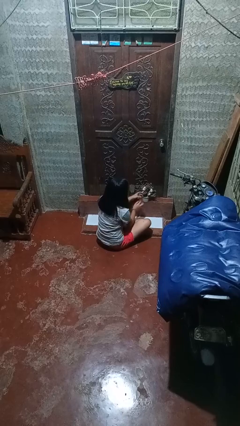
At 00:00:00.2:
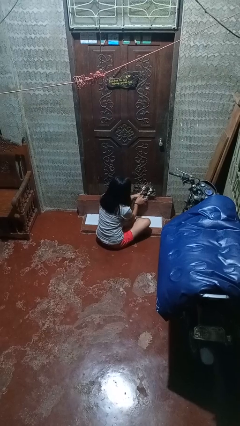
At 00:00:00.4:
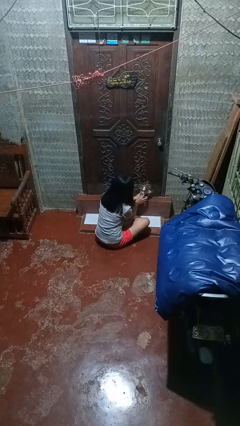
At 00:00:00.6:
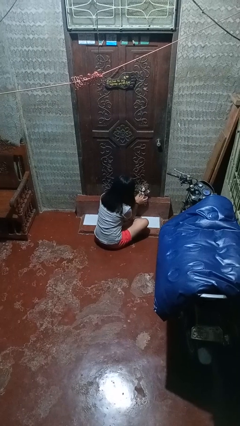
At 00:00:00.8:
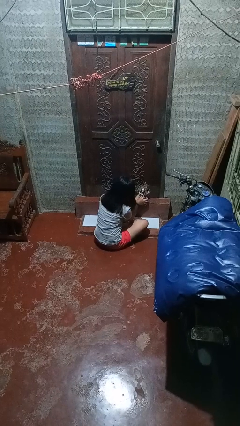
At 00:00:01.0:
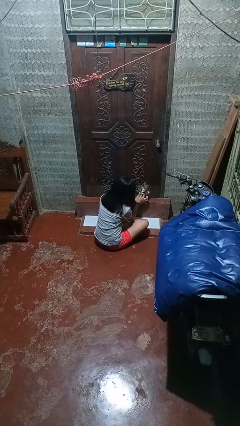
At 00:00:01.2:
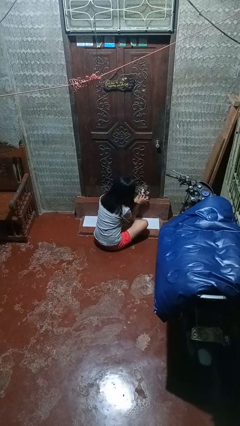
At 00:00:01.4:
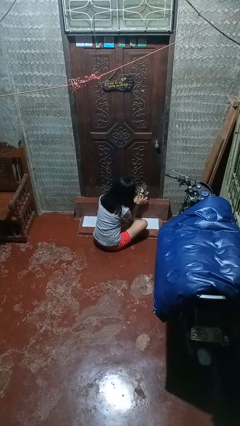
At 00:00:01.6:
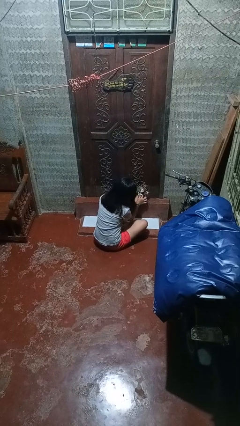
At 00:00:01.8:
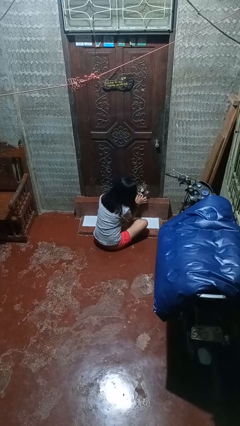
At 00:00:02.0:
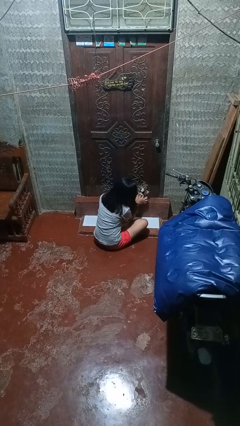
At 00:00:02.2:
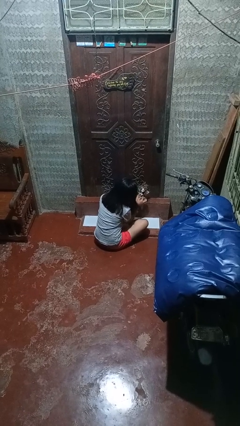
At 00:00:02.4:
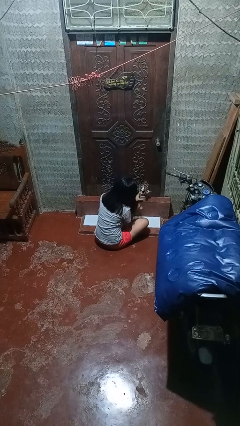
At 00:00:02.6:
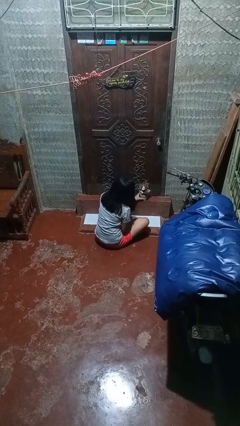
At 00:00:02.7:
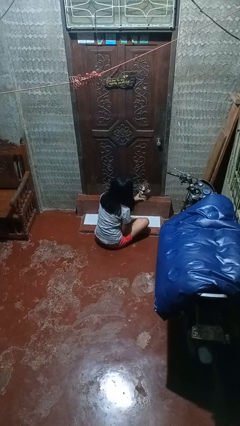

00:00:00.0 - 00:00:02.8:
person arranges flowers in vase

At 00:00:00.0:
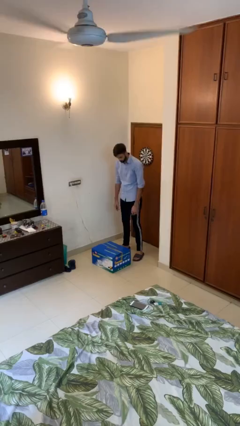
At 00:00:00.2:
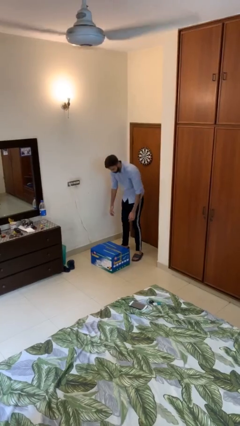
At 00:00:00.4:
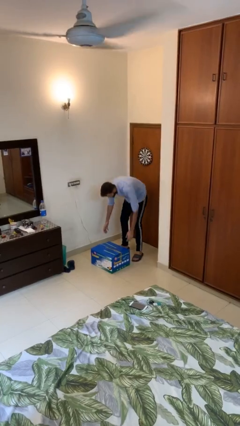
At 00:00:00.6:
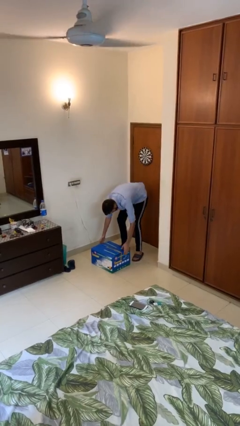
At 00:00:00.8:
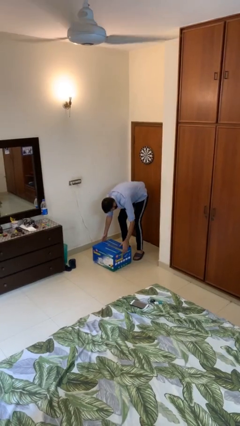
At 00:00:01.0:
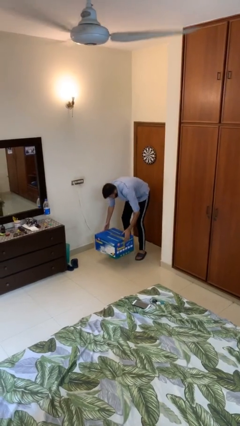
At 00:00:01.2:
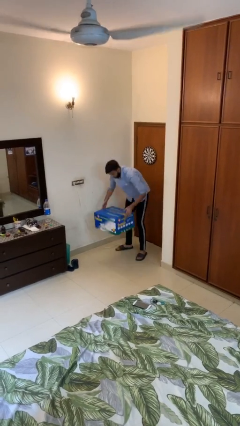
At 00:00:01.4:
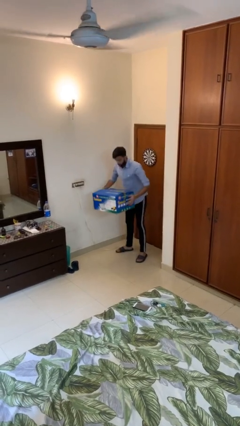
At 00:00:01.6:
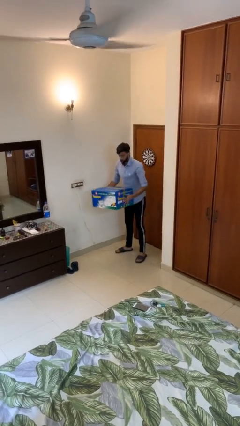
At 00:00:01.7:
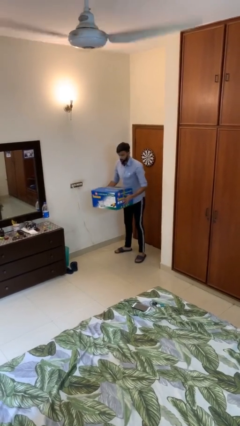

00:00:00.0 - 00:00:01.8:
person picks up object from floor

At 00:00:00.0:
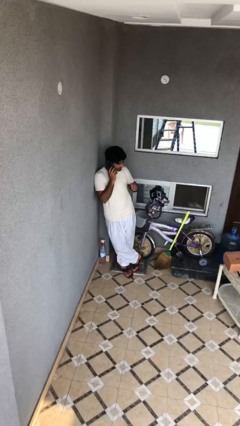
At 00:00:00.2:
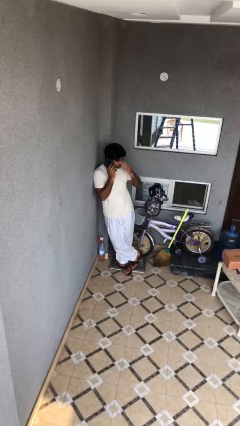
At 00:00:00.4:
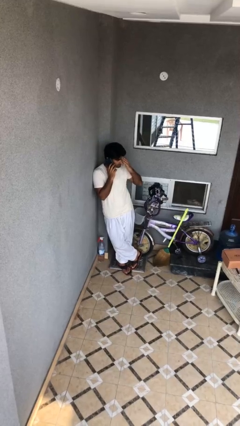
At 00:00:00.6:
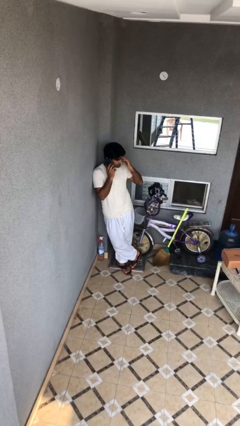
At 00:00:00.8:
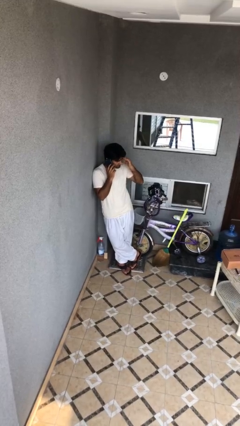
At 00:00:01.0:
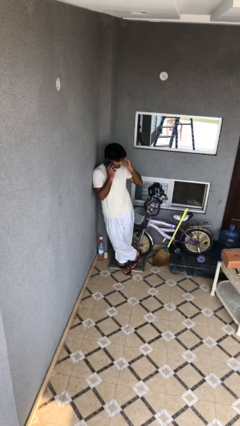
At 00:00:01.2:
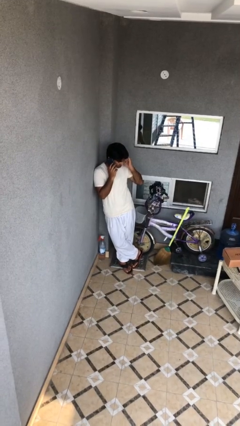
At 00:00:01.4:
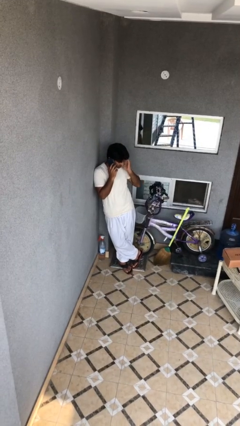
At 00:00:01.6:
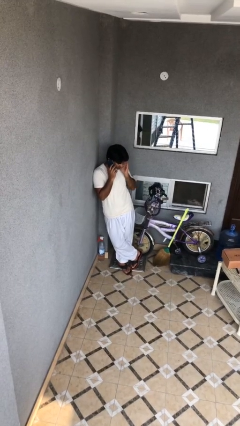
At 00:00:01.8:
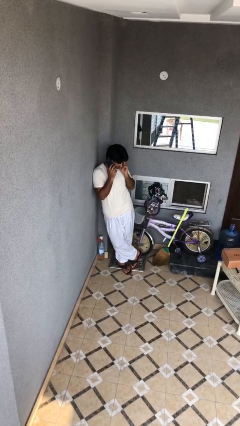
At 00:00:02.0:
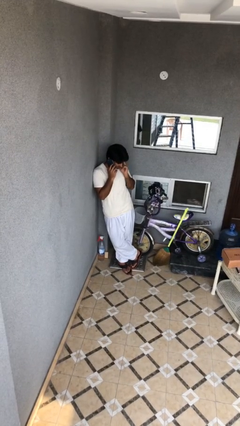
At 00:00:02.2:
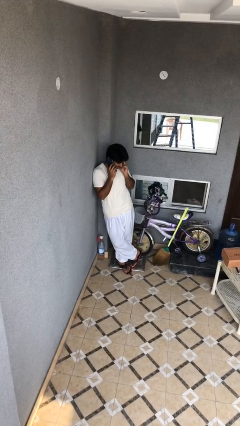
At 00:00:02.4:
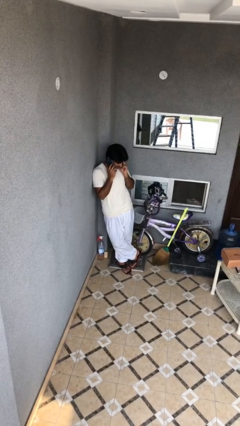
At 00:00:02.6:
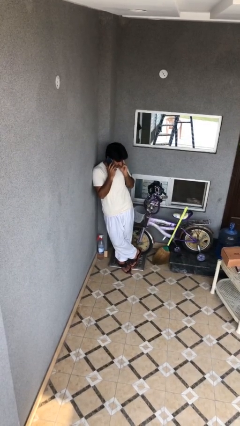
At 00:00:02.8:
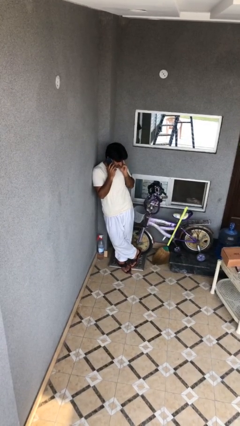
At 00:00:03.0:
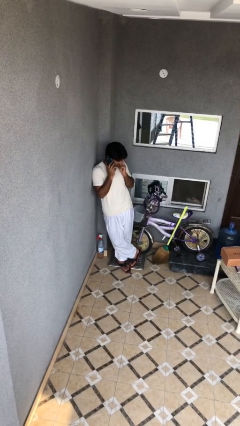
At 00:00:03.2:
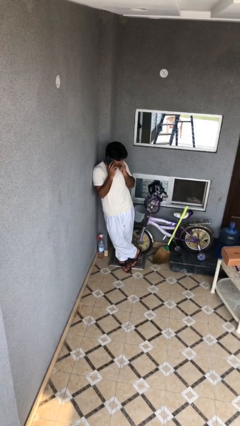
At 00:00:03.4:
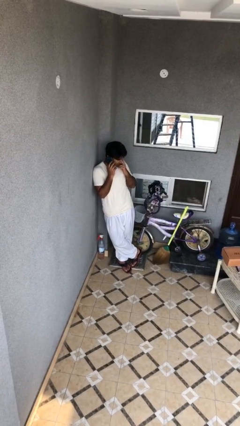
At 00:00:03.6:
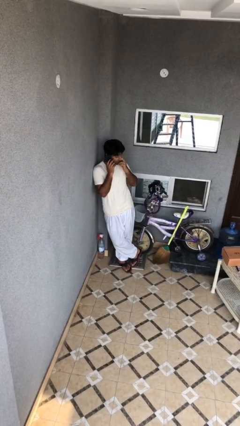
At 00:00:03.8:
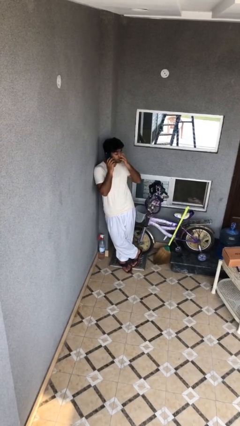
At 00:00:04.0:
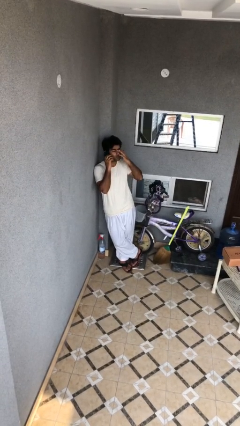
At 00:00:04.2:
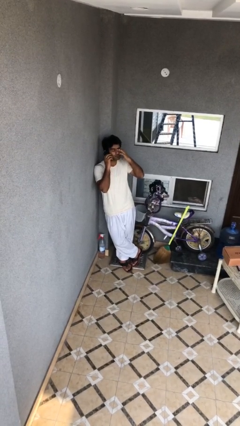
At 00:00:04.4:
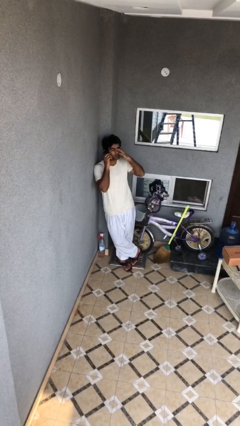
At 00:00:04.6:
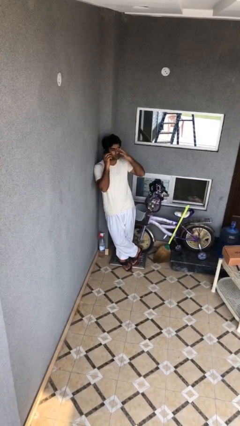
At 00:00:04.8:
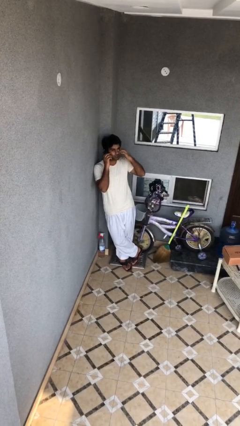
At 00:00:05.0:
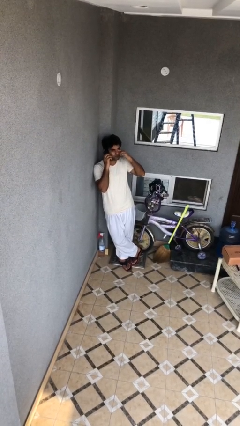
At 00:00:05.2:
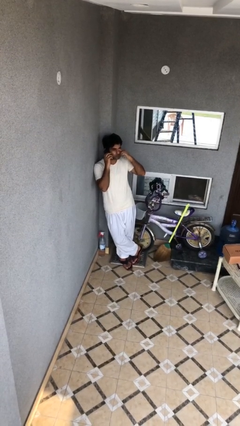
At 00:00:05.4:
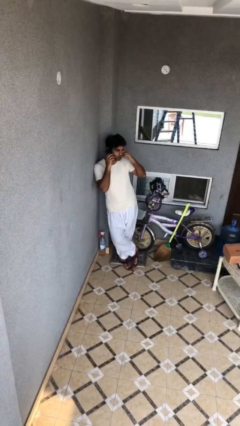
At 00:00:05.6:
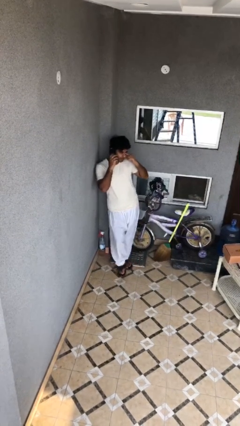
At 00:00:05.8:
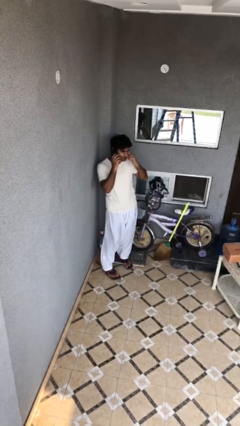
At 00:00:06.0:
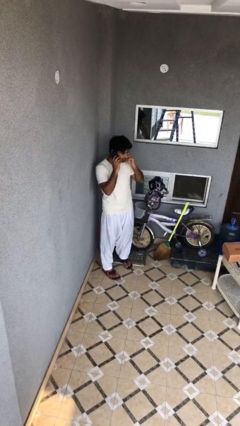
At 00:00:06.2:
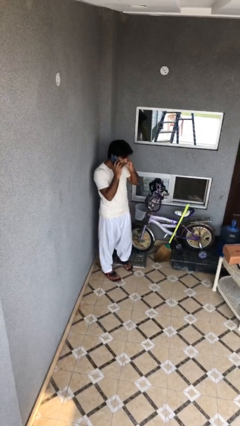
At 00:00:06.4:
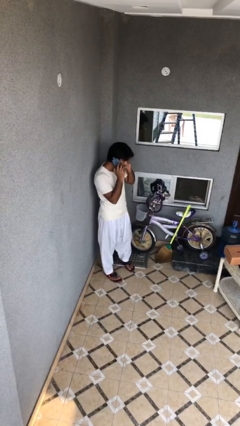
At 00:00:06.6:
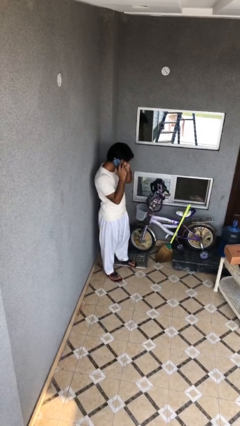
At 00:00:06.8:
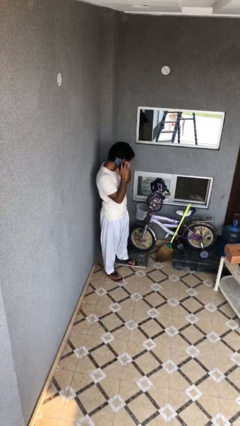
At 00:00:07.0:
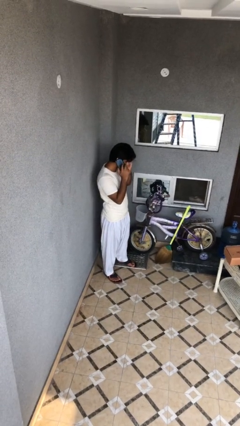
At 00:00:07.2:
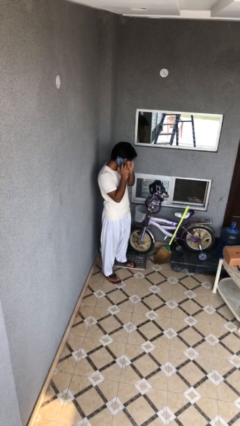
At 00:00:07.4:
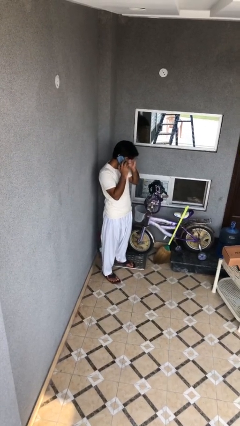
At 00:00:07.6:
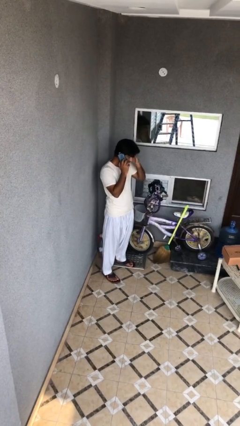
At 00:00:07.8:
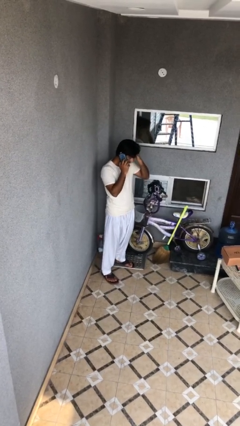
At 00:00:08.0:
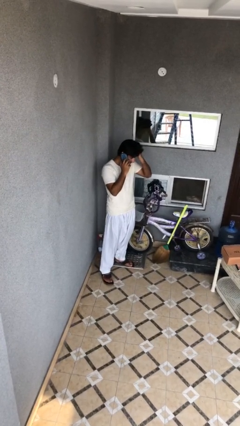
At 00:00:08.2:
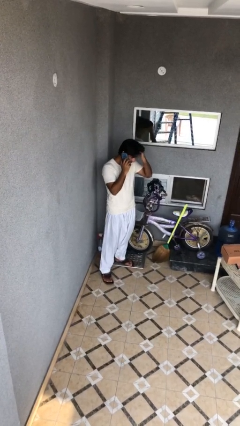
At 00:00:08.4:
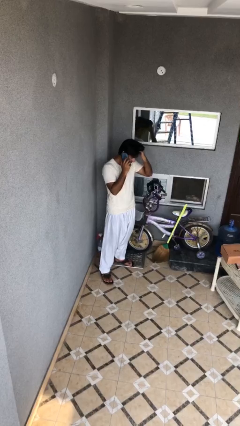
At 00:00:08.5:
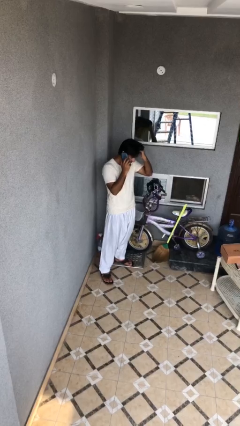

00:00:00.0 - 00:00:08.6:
person talks on phone

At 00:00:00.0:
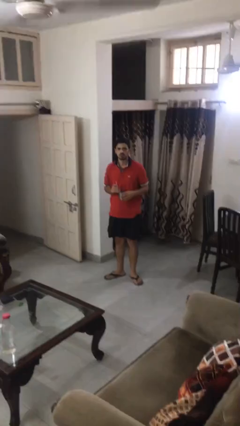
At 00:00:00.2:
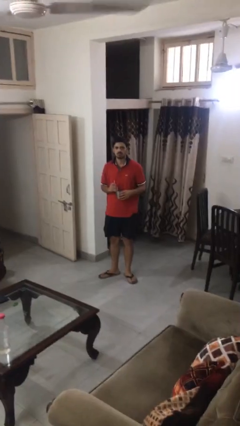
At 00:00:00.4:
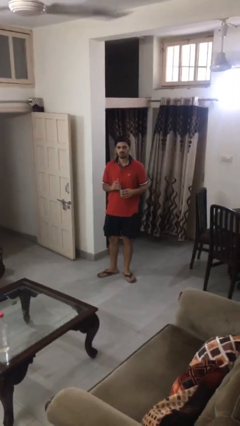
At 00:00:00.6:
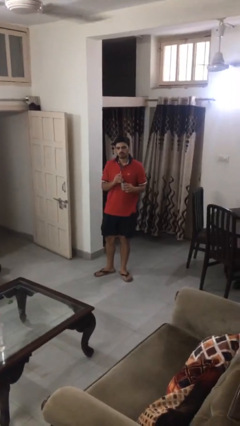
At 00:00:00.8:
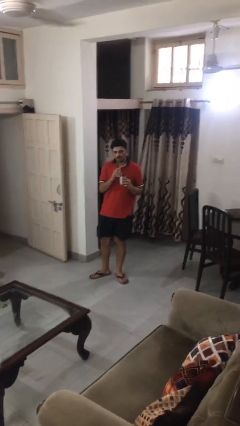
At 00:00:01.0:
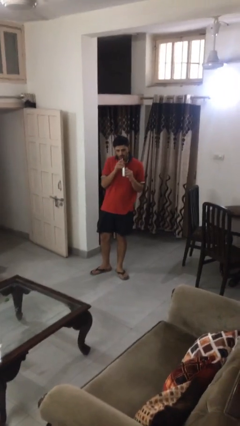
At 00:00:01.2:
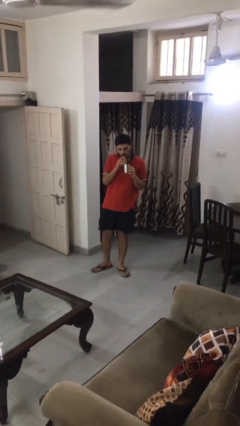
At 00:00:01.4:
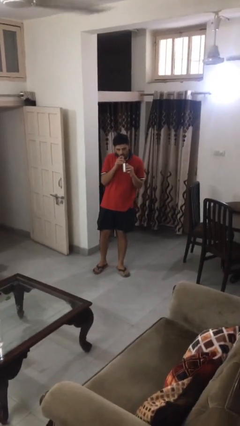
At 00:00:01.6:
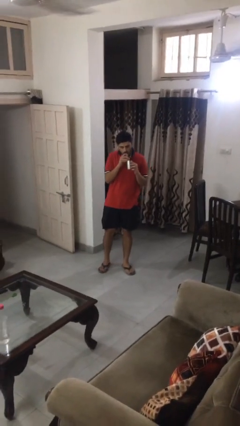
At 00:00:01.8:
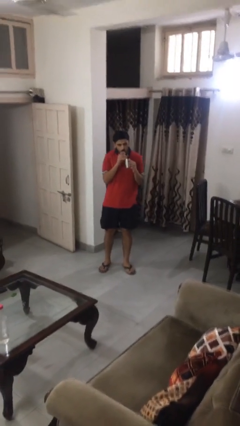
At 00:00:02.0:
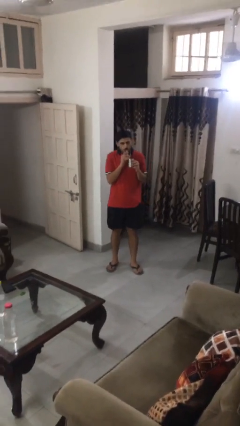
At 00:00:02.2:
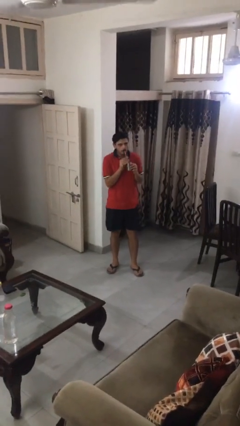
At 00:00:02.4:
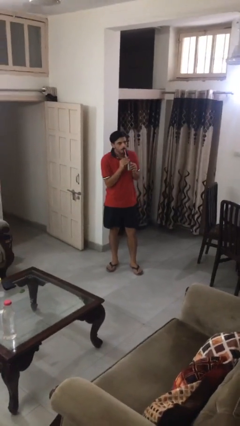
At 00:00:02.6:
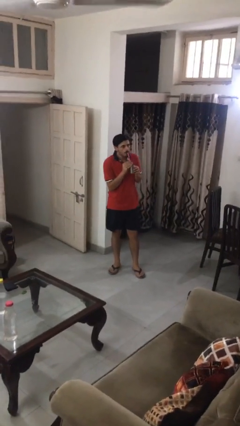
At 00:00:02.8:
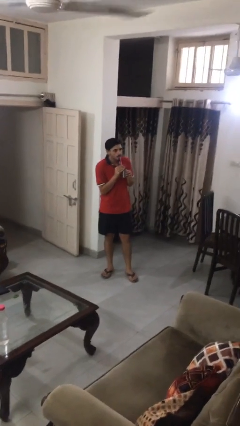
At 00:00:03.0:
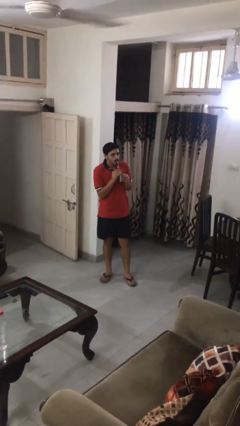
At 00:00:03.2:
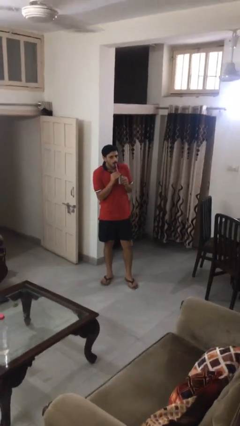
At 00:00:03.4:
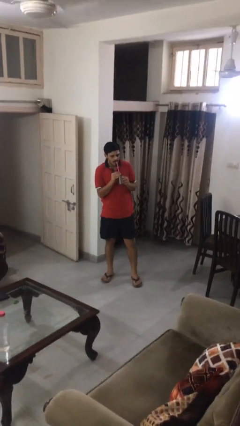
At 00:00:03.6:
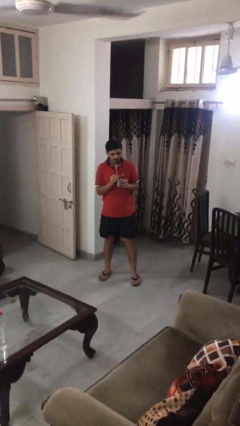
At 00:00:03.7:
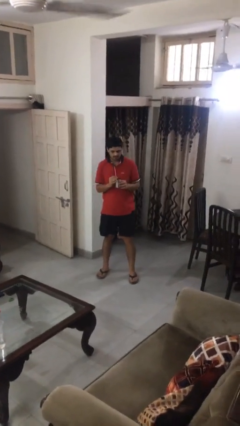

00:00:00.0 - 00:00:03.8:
person drinks from straw

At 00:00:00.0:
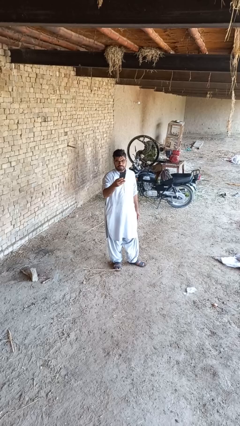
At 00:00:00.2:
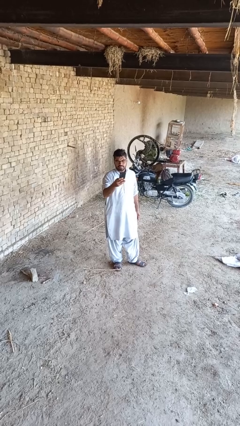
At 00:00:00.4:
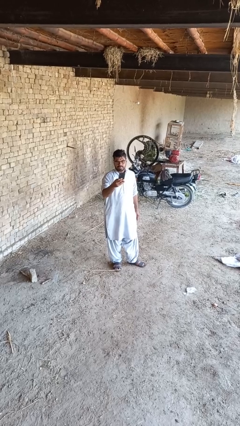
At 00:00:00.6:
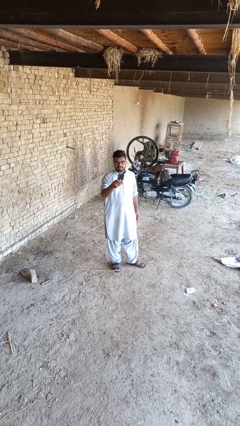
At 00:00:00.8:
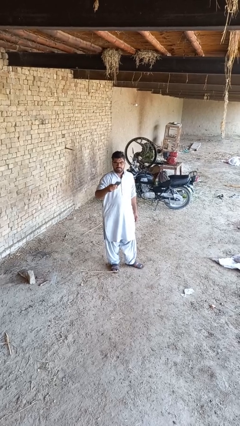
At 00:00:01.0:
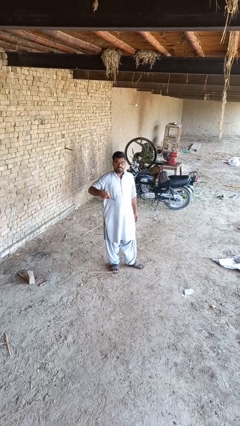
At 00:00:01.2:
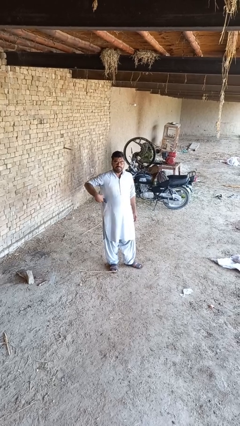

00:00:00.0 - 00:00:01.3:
person puts phone into pocket
